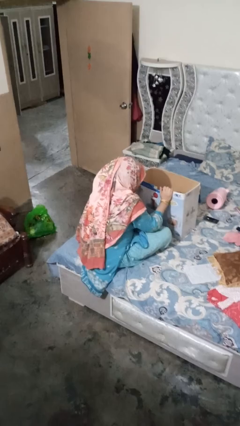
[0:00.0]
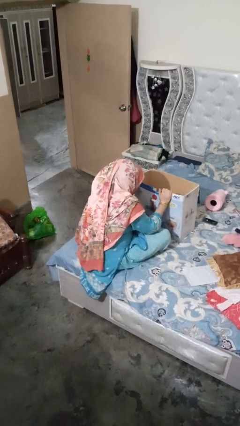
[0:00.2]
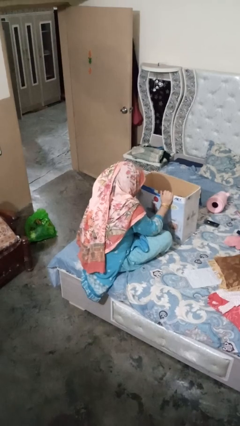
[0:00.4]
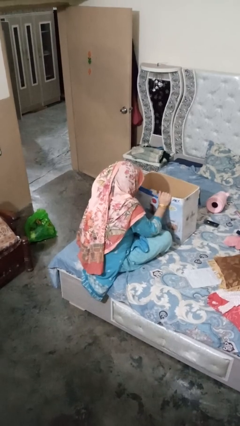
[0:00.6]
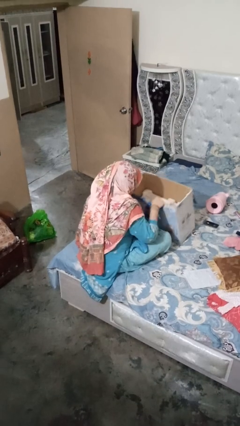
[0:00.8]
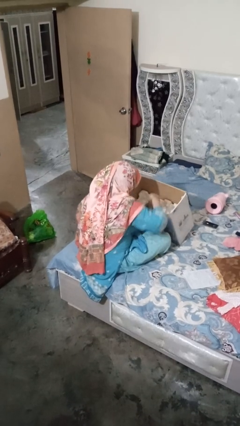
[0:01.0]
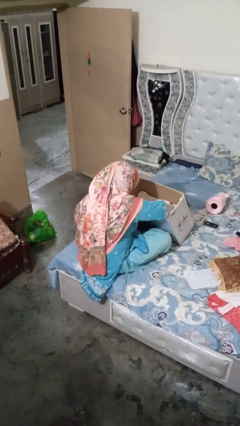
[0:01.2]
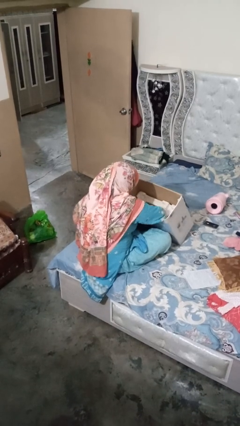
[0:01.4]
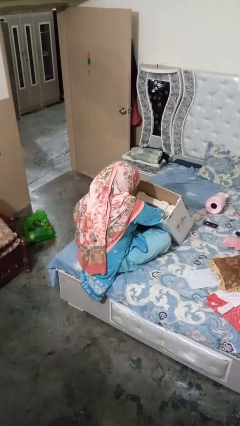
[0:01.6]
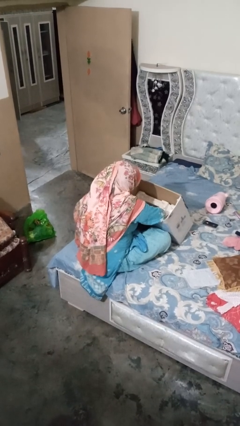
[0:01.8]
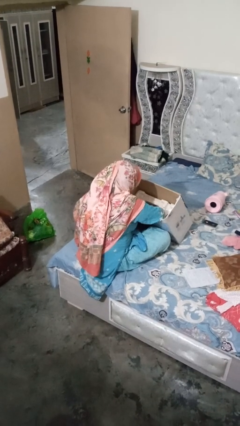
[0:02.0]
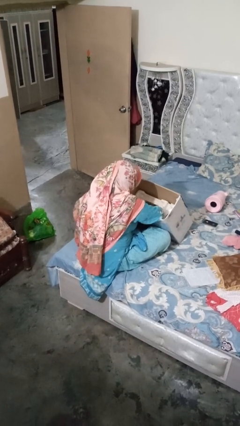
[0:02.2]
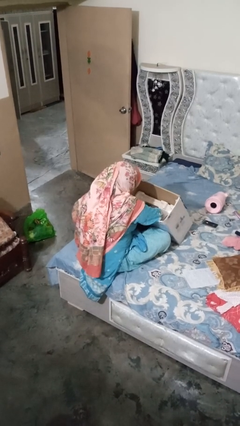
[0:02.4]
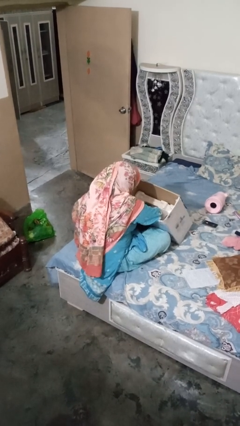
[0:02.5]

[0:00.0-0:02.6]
person searches in box

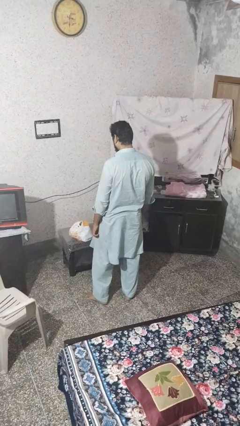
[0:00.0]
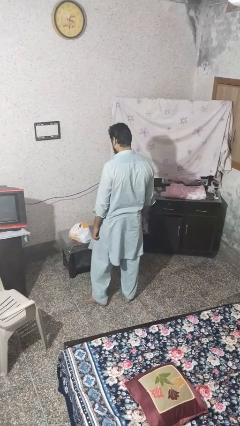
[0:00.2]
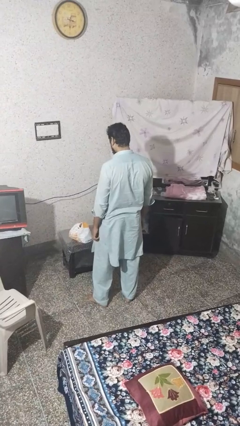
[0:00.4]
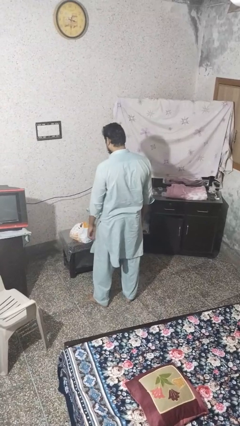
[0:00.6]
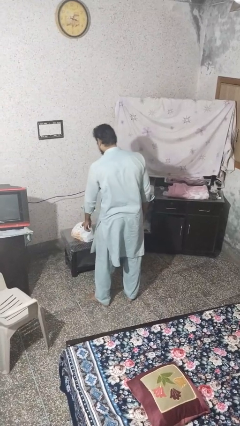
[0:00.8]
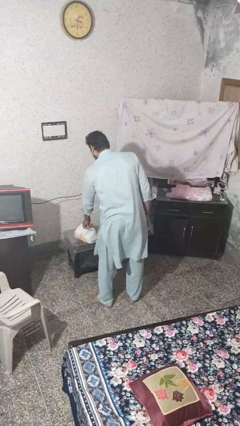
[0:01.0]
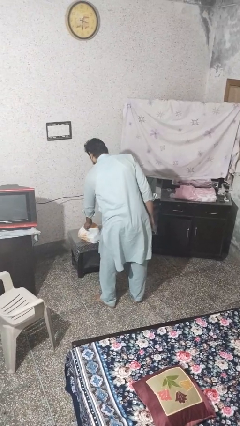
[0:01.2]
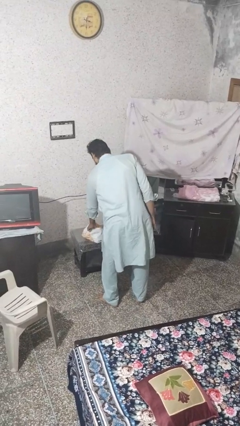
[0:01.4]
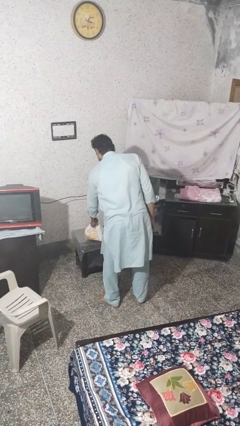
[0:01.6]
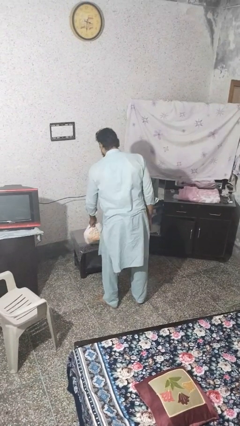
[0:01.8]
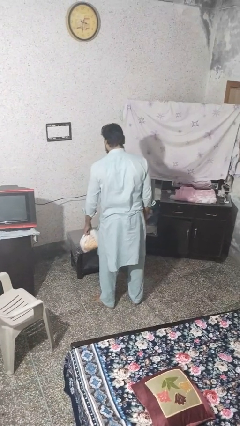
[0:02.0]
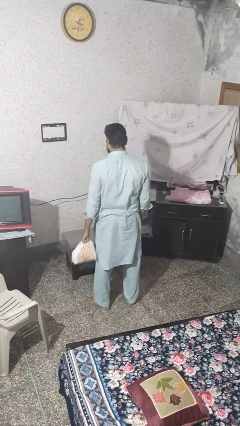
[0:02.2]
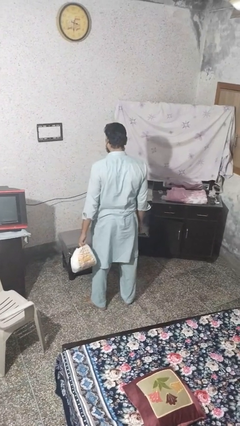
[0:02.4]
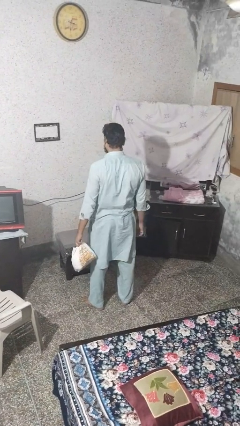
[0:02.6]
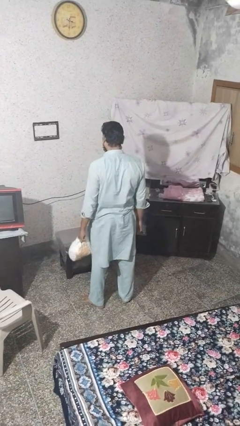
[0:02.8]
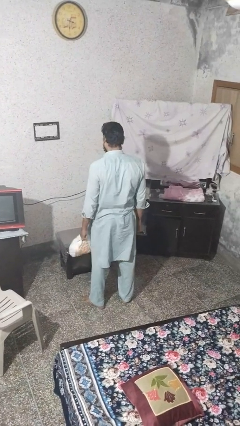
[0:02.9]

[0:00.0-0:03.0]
person picks up object from table

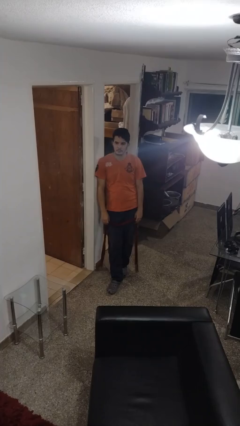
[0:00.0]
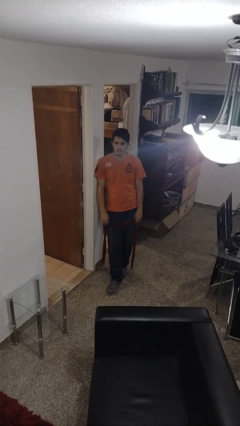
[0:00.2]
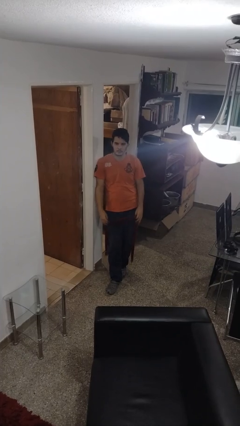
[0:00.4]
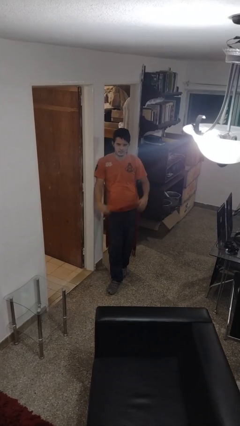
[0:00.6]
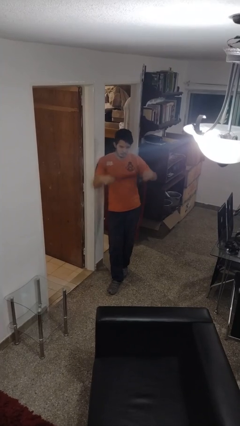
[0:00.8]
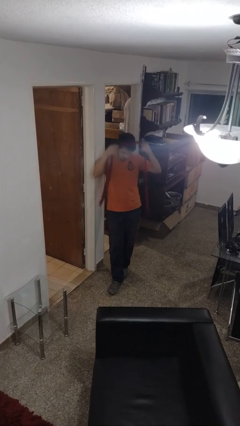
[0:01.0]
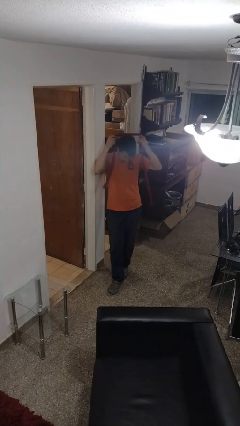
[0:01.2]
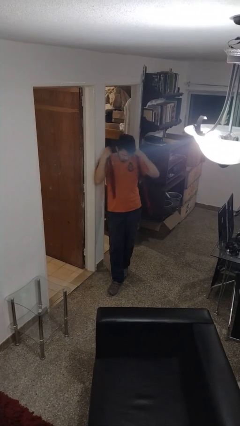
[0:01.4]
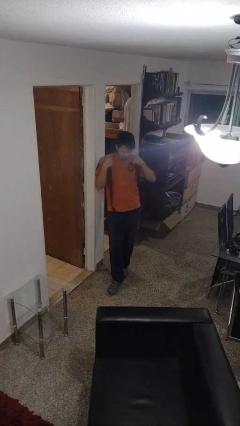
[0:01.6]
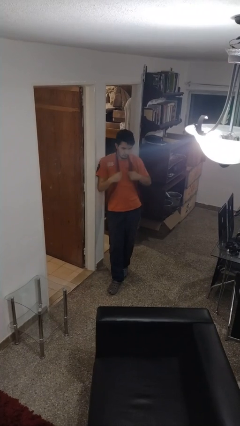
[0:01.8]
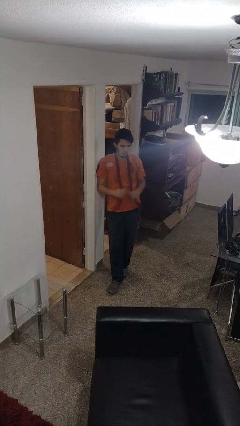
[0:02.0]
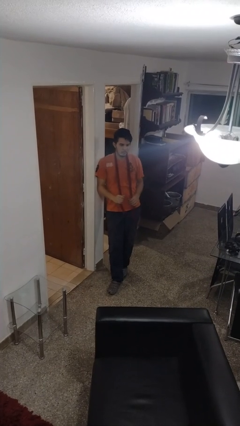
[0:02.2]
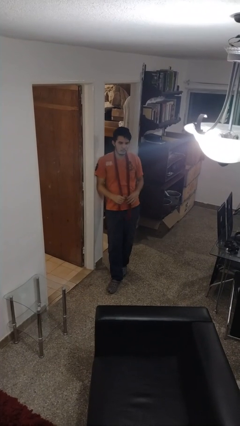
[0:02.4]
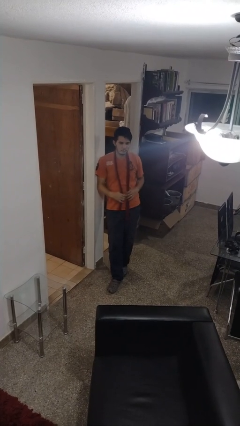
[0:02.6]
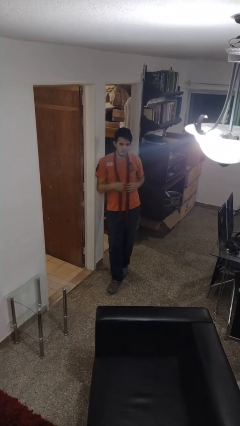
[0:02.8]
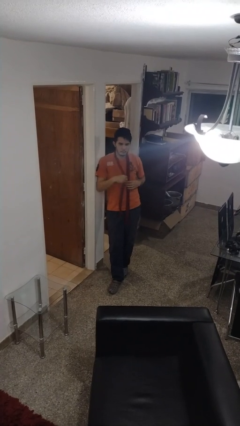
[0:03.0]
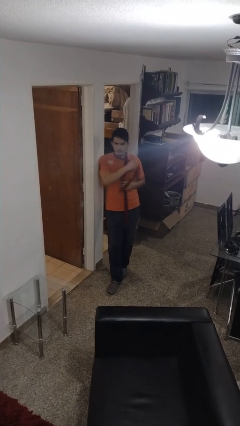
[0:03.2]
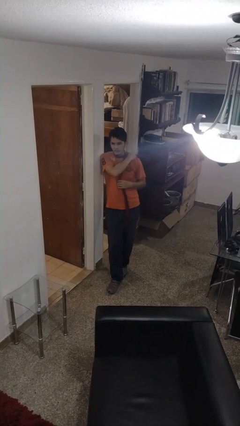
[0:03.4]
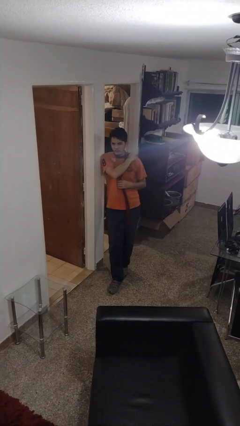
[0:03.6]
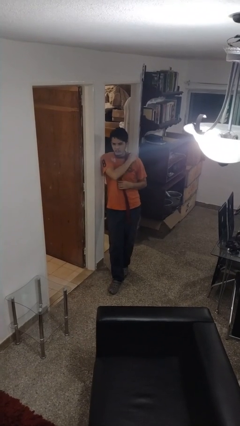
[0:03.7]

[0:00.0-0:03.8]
person puts on scarf

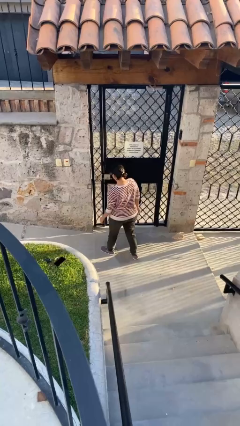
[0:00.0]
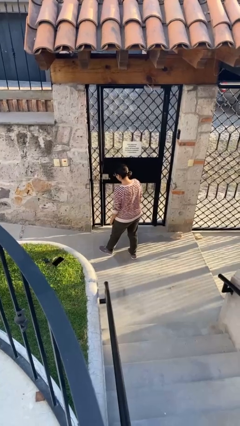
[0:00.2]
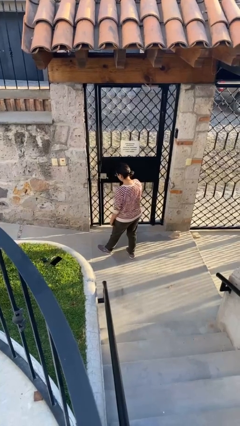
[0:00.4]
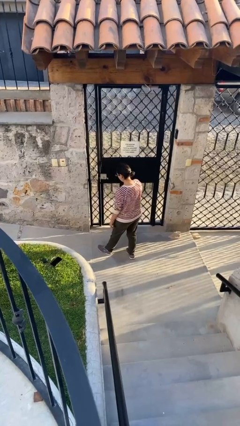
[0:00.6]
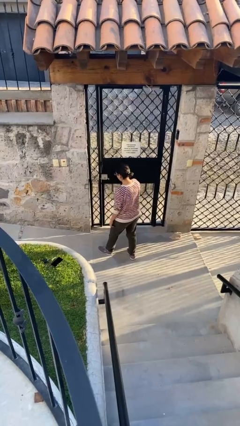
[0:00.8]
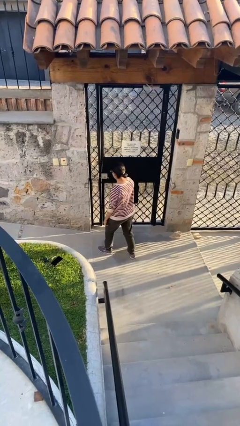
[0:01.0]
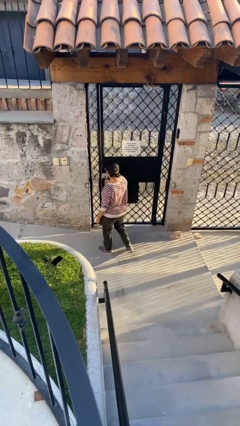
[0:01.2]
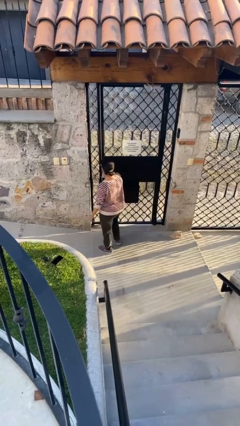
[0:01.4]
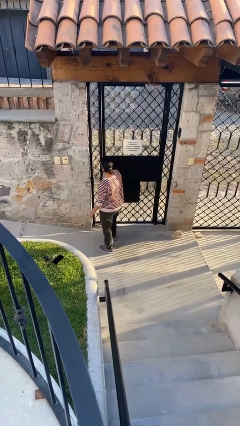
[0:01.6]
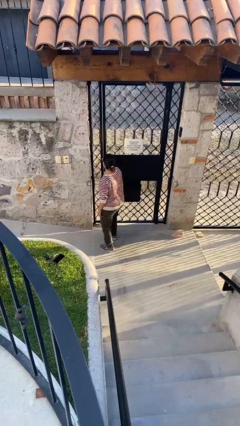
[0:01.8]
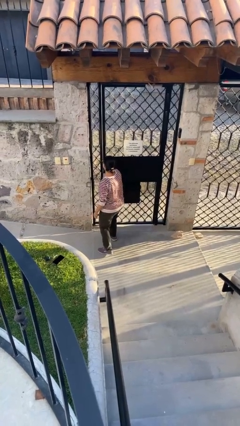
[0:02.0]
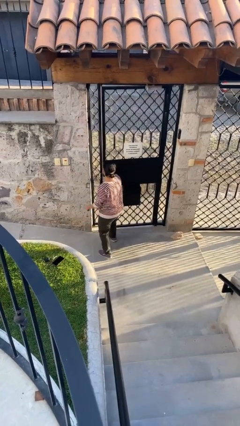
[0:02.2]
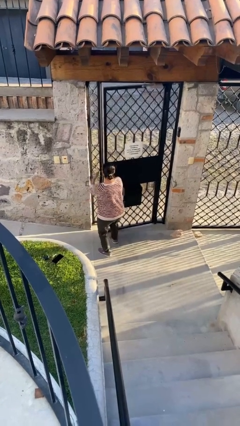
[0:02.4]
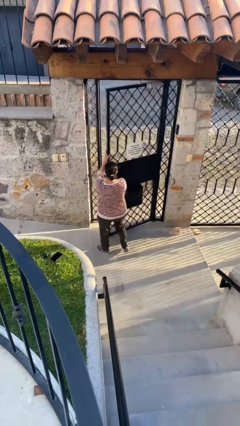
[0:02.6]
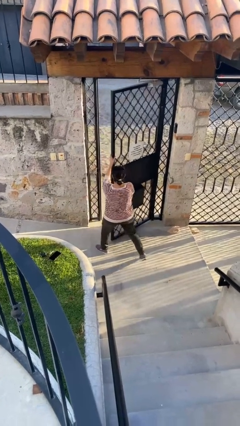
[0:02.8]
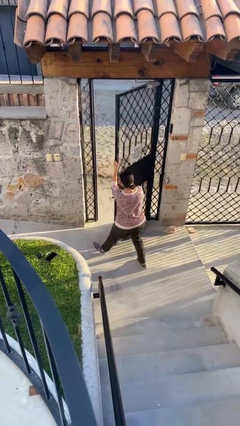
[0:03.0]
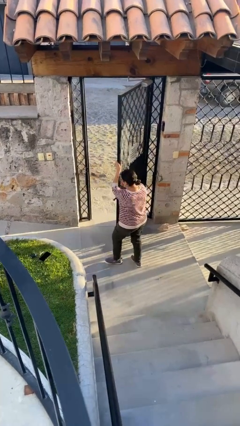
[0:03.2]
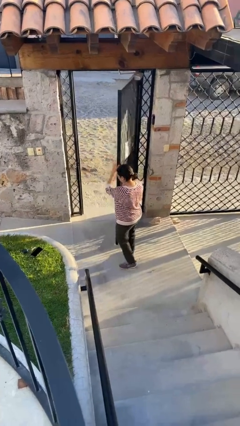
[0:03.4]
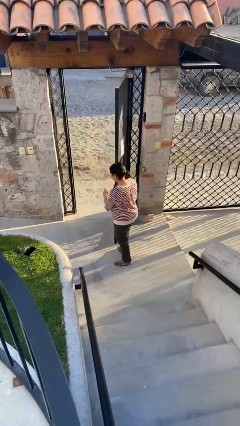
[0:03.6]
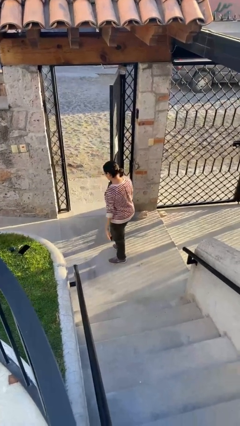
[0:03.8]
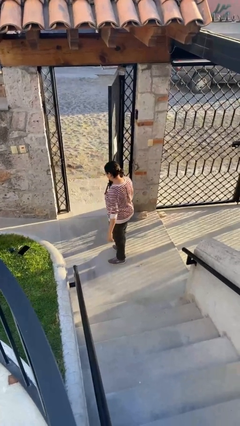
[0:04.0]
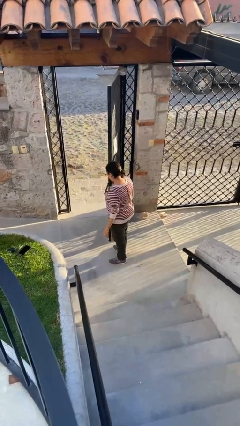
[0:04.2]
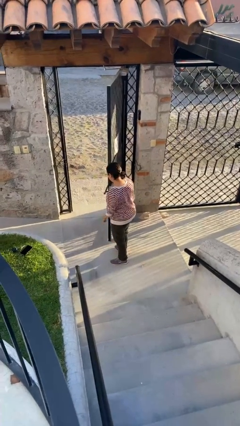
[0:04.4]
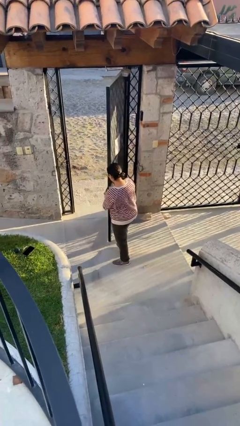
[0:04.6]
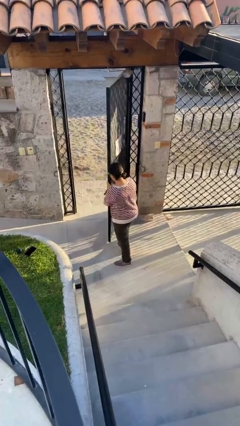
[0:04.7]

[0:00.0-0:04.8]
person opens facility door

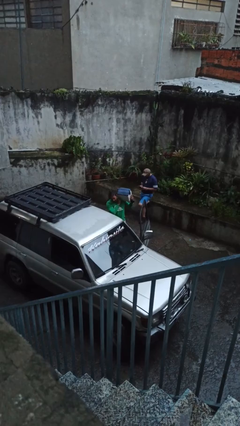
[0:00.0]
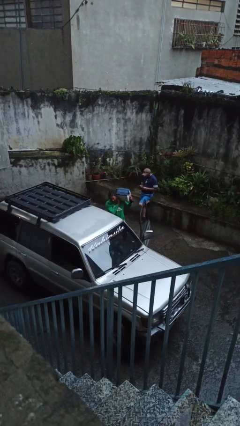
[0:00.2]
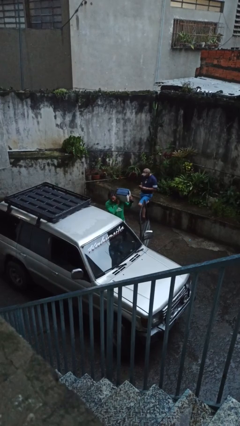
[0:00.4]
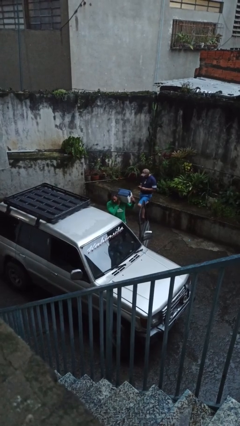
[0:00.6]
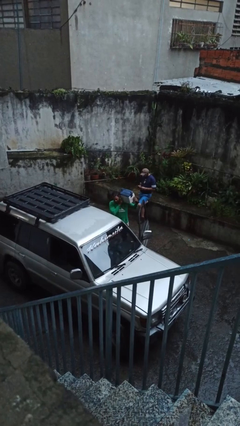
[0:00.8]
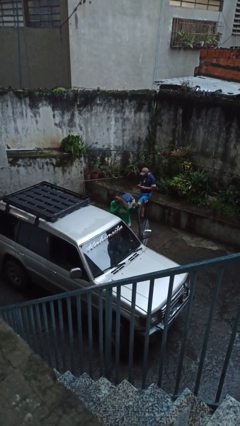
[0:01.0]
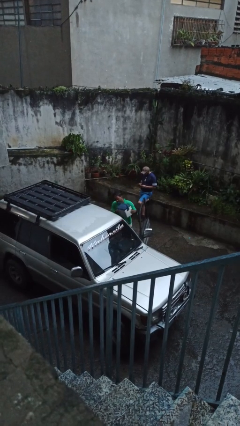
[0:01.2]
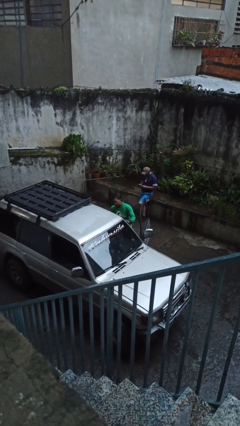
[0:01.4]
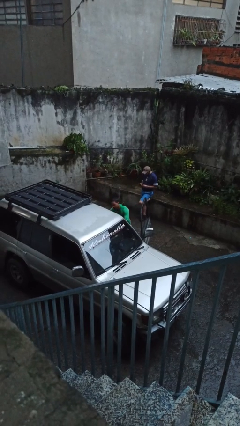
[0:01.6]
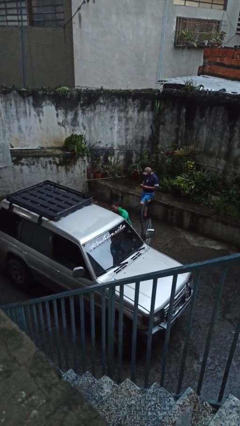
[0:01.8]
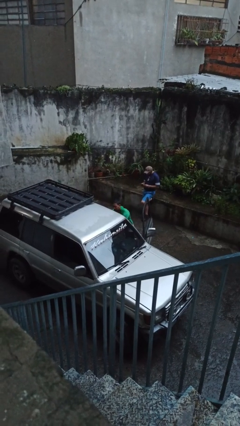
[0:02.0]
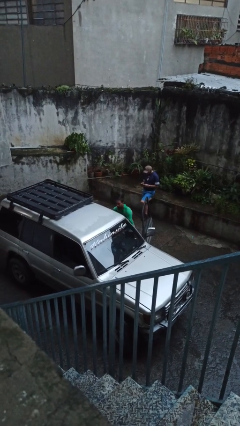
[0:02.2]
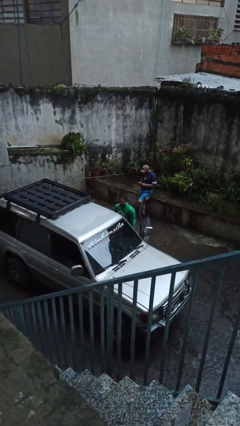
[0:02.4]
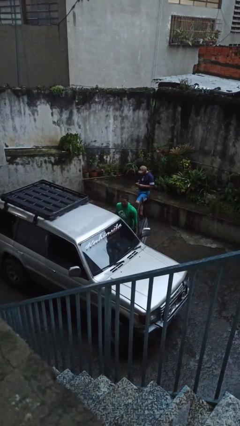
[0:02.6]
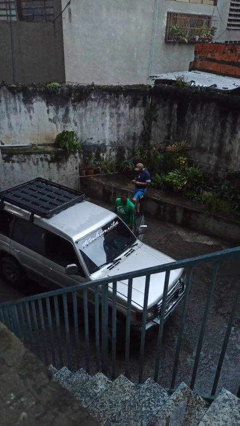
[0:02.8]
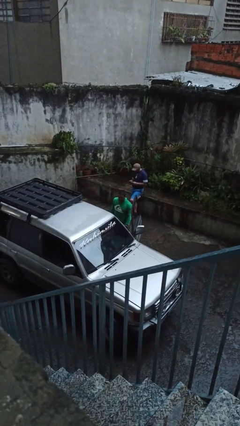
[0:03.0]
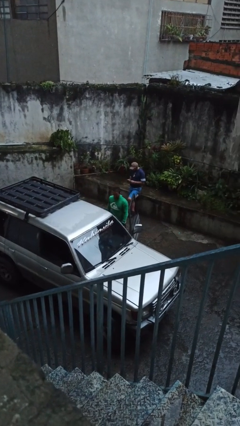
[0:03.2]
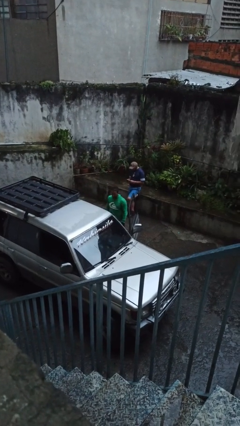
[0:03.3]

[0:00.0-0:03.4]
person loads car
